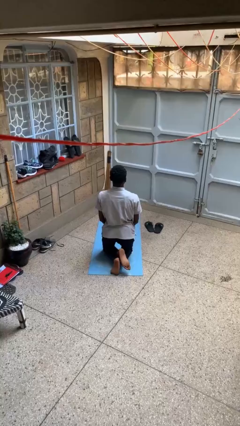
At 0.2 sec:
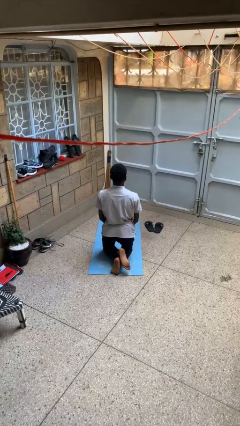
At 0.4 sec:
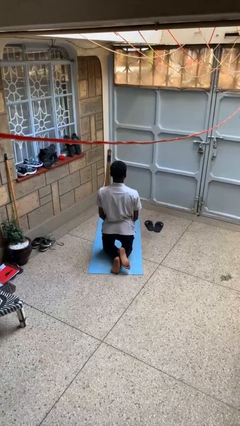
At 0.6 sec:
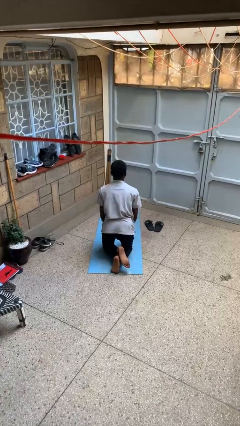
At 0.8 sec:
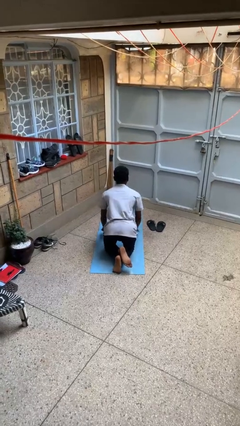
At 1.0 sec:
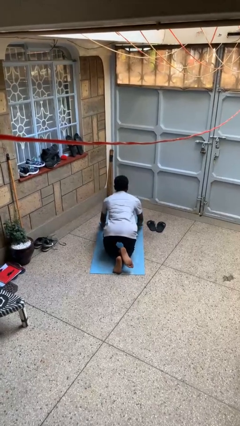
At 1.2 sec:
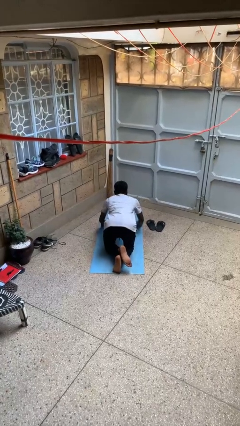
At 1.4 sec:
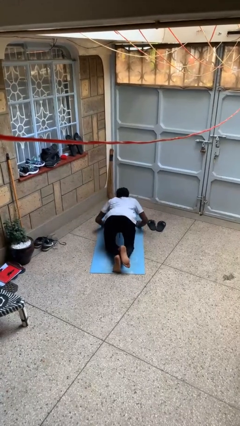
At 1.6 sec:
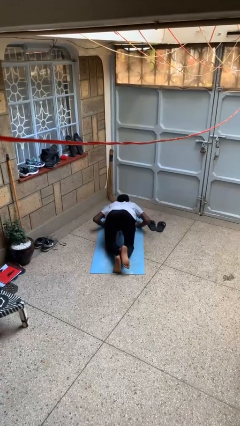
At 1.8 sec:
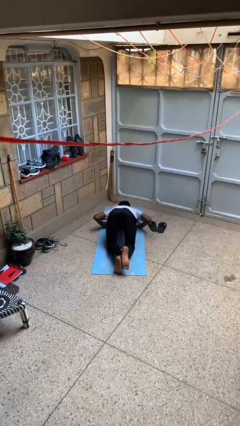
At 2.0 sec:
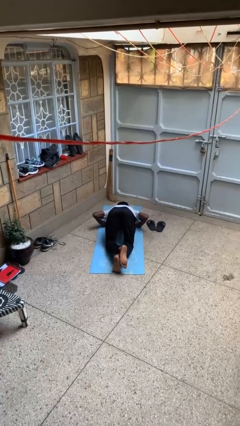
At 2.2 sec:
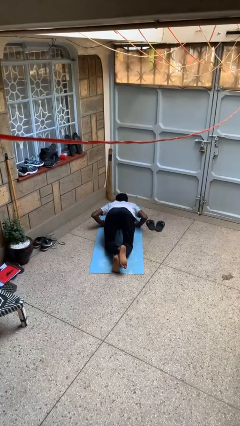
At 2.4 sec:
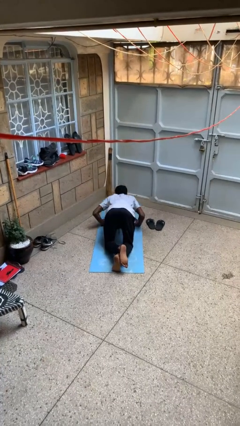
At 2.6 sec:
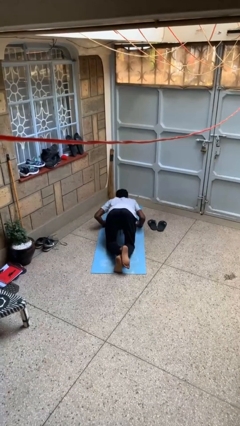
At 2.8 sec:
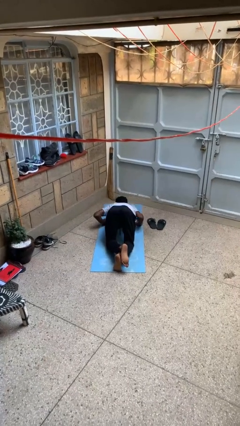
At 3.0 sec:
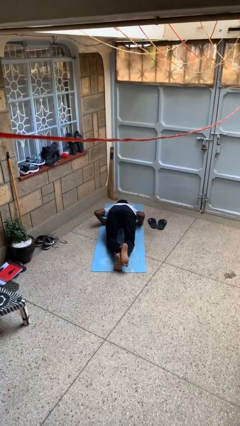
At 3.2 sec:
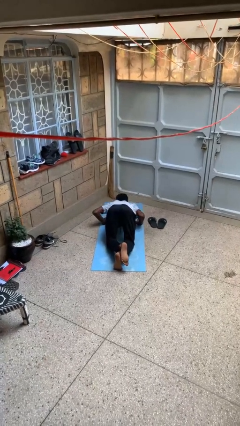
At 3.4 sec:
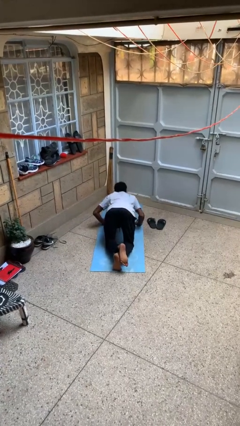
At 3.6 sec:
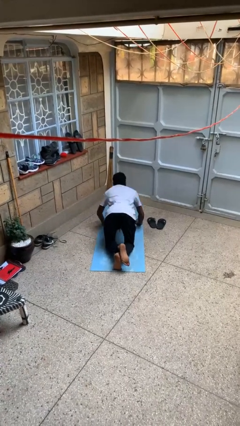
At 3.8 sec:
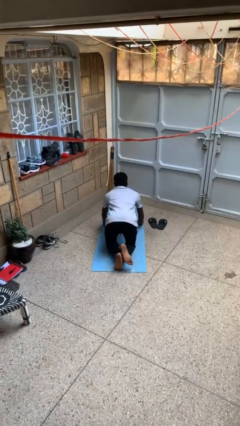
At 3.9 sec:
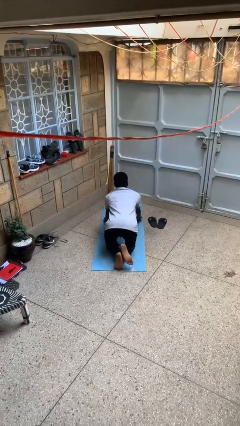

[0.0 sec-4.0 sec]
person exercises with pushup

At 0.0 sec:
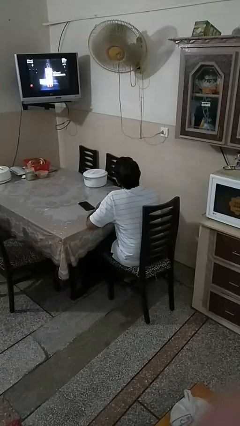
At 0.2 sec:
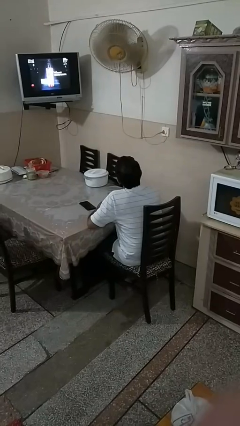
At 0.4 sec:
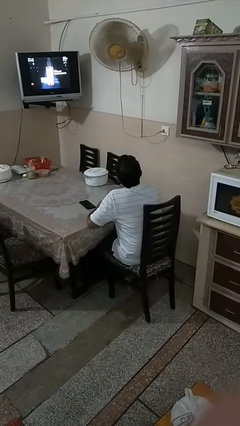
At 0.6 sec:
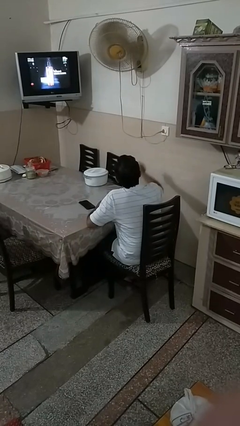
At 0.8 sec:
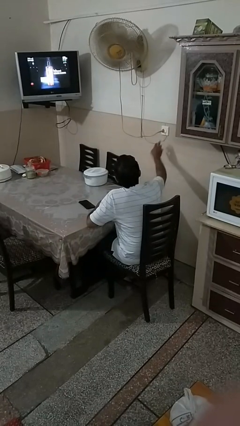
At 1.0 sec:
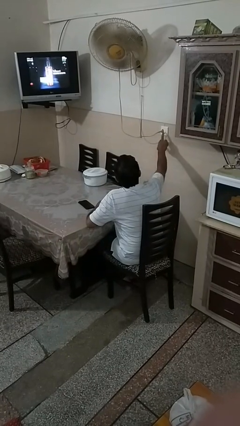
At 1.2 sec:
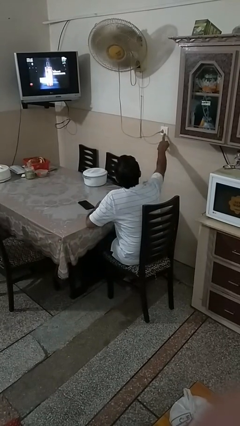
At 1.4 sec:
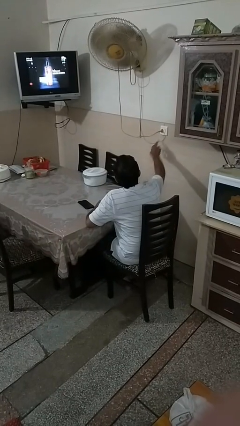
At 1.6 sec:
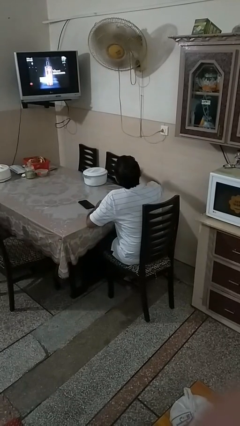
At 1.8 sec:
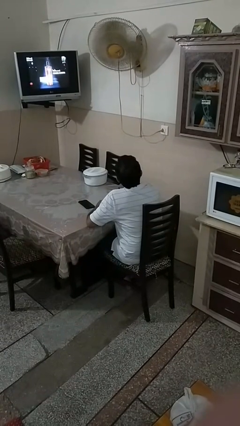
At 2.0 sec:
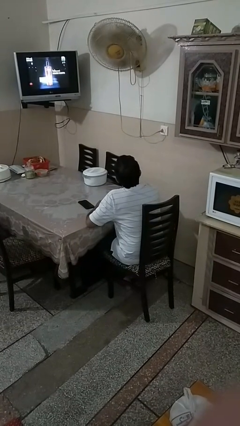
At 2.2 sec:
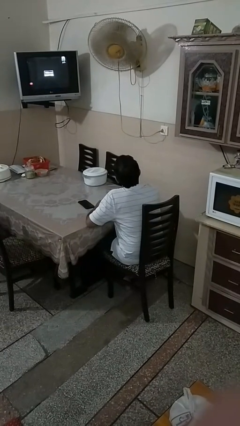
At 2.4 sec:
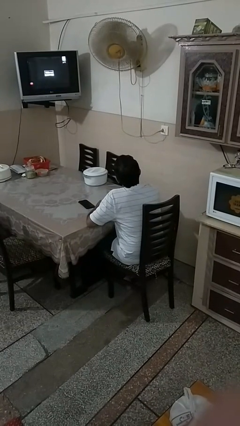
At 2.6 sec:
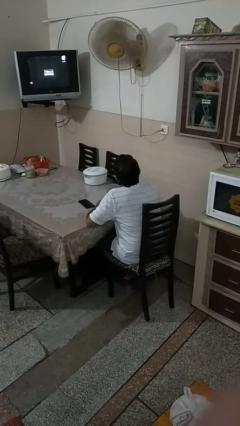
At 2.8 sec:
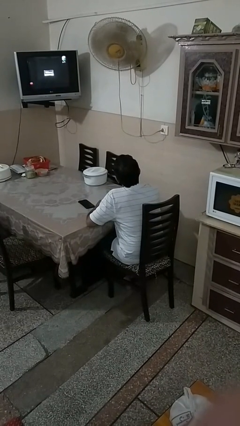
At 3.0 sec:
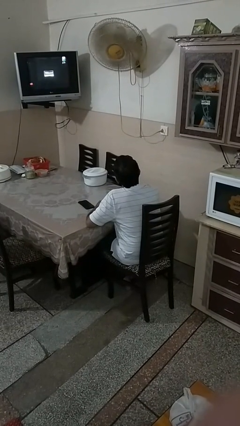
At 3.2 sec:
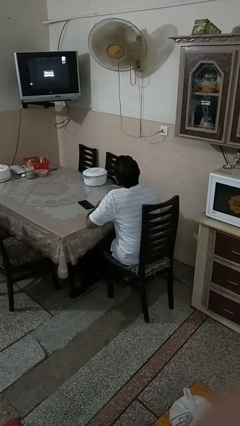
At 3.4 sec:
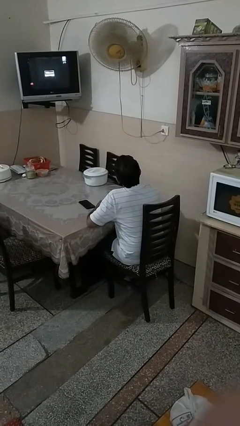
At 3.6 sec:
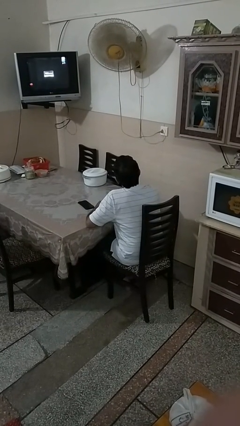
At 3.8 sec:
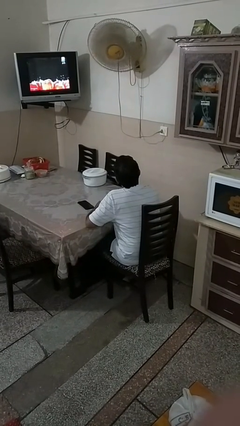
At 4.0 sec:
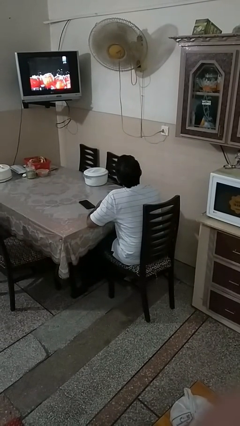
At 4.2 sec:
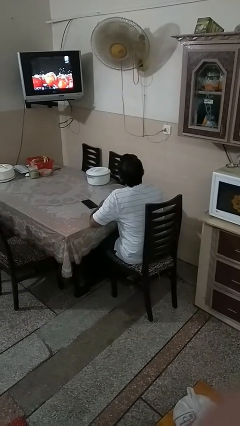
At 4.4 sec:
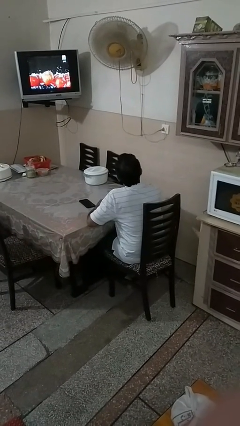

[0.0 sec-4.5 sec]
person turns on fan

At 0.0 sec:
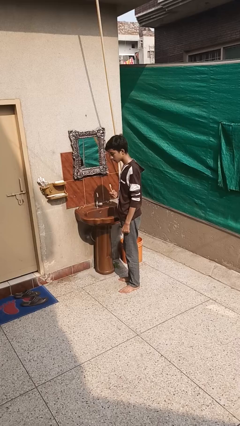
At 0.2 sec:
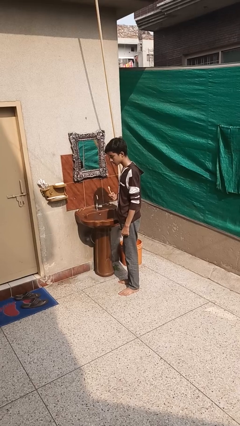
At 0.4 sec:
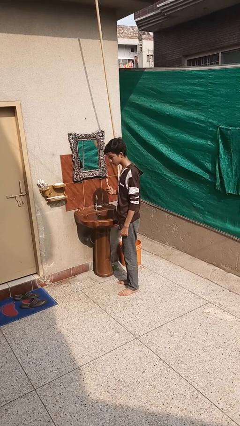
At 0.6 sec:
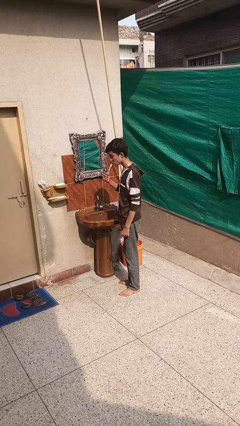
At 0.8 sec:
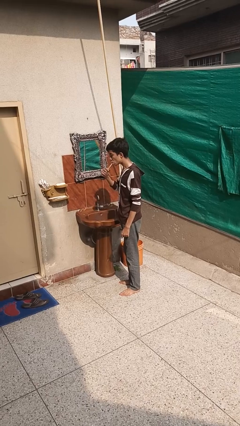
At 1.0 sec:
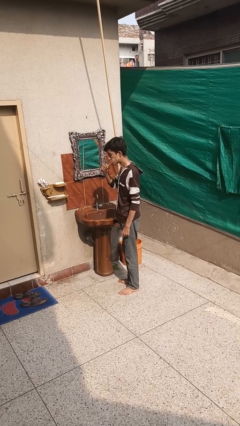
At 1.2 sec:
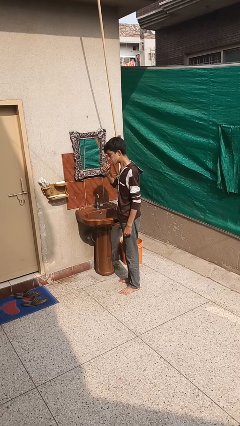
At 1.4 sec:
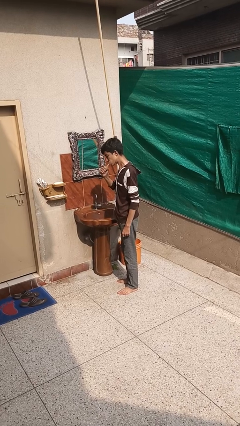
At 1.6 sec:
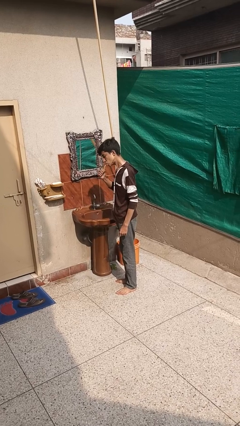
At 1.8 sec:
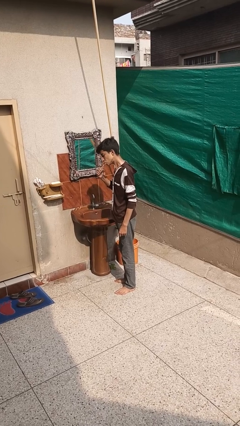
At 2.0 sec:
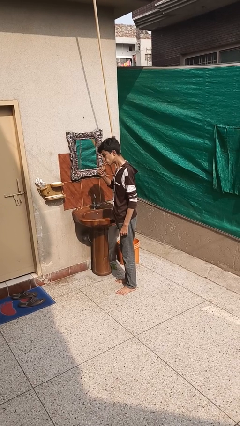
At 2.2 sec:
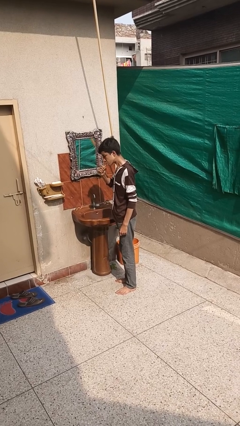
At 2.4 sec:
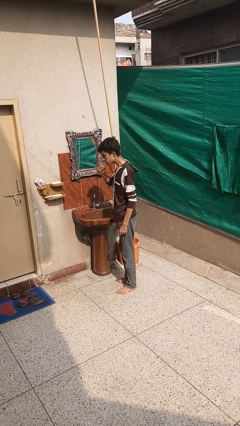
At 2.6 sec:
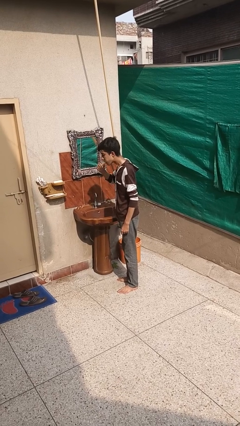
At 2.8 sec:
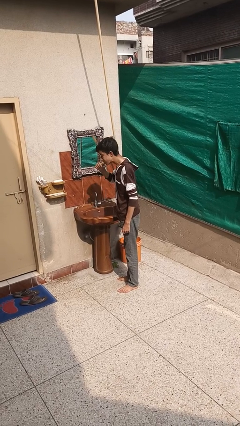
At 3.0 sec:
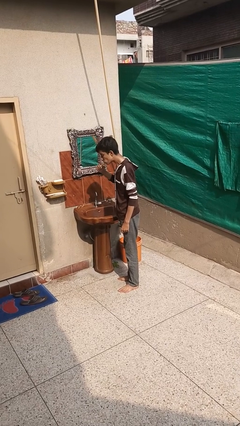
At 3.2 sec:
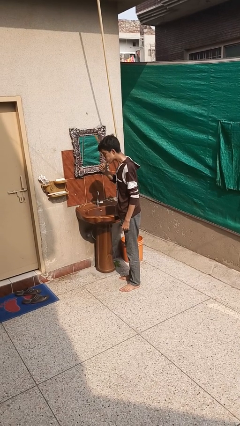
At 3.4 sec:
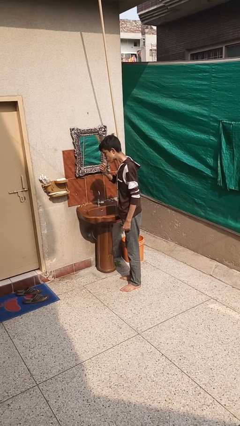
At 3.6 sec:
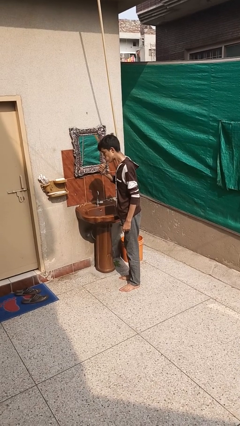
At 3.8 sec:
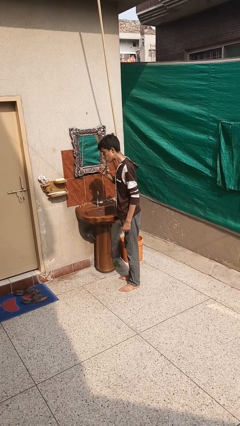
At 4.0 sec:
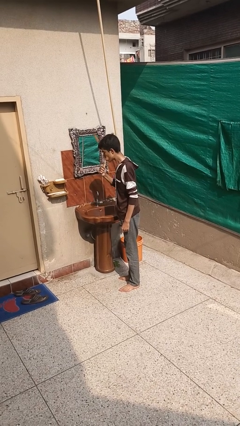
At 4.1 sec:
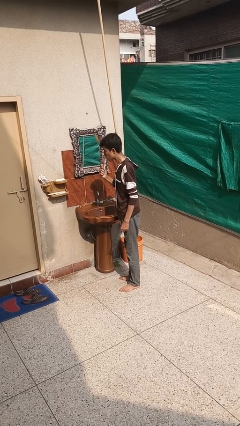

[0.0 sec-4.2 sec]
person brushes teeth

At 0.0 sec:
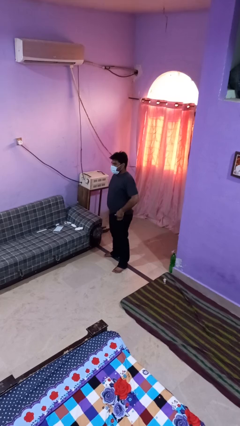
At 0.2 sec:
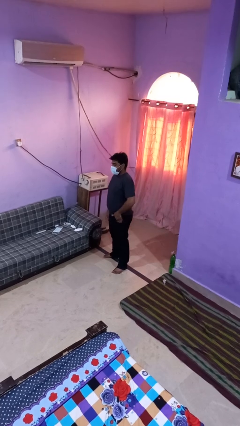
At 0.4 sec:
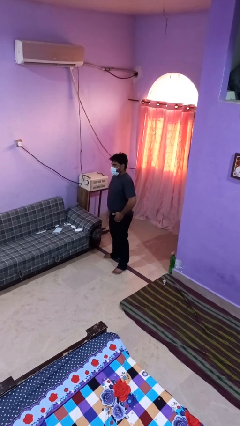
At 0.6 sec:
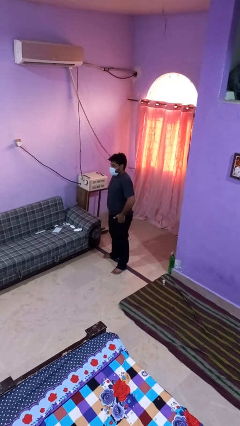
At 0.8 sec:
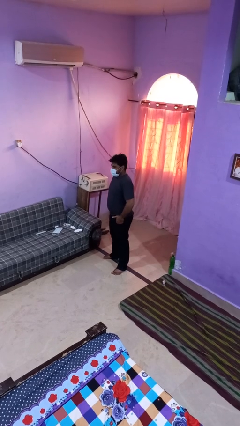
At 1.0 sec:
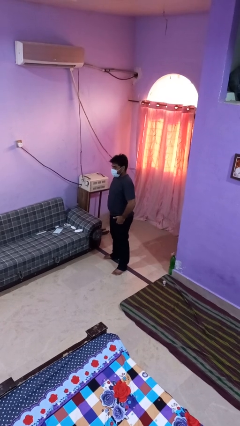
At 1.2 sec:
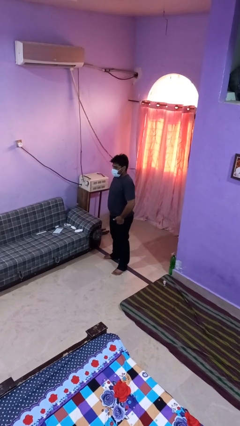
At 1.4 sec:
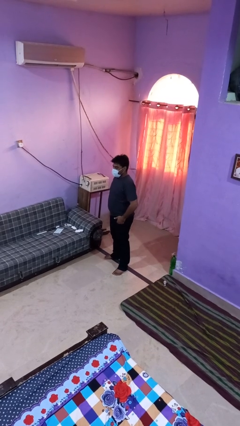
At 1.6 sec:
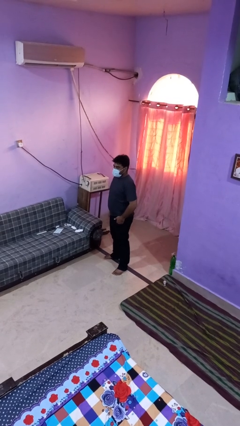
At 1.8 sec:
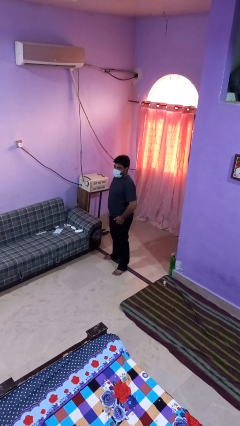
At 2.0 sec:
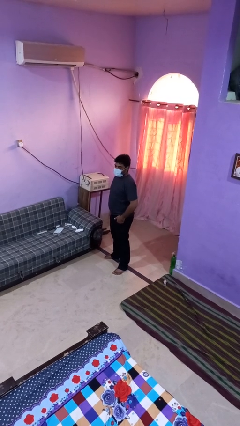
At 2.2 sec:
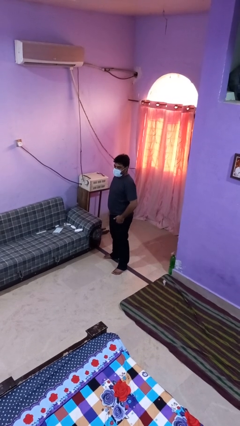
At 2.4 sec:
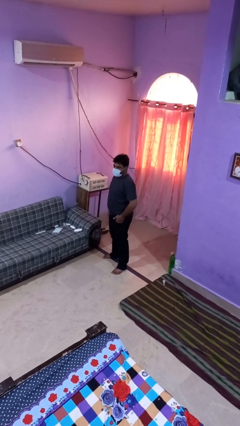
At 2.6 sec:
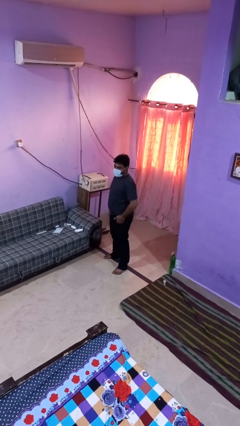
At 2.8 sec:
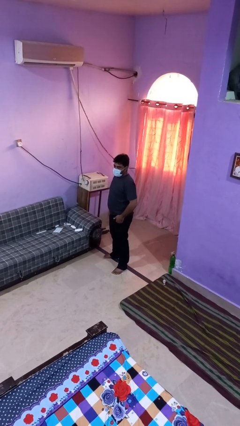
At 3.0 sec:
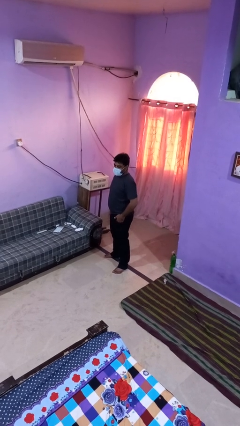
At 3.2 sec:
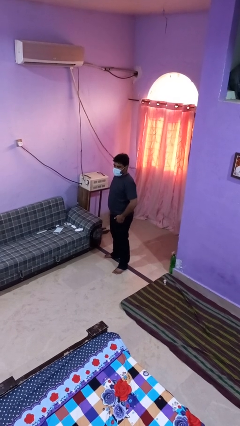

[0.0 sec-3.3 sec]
person puts hands in back pockets

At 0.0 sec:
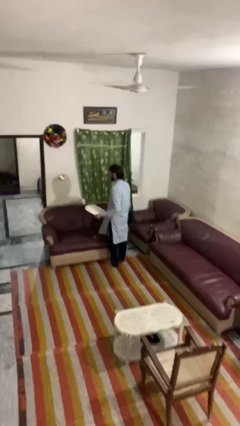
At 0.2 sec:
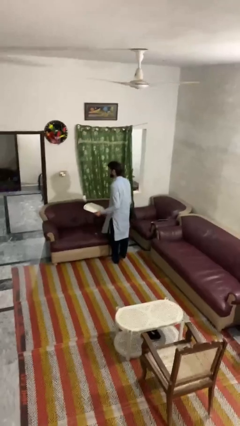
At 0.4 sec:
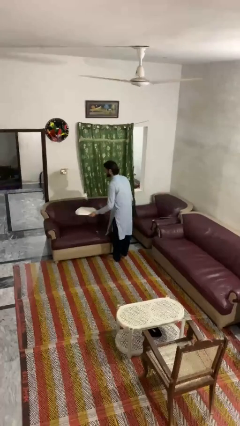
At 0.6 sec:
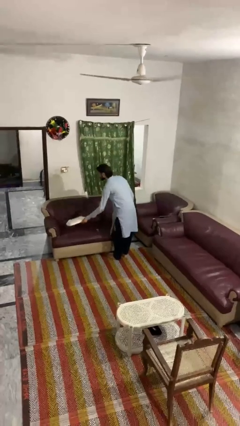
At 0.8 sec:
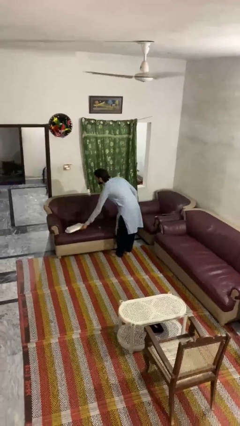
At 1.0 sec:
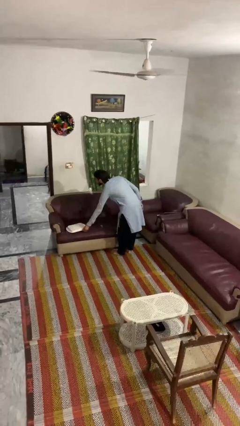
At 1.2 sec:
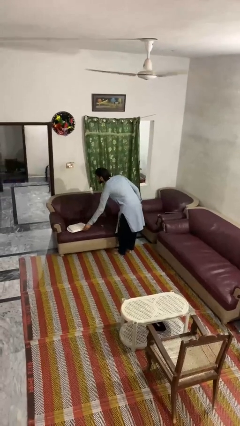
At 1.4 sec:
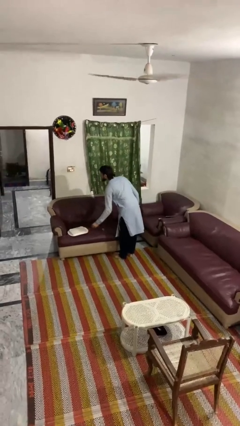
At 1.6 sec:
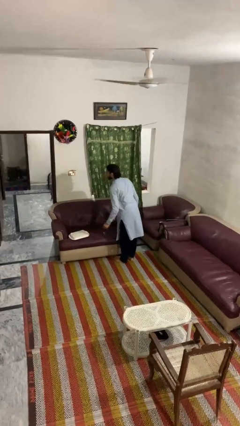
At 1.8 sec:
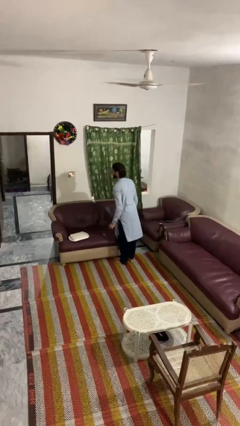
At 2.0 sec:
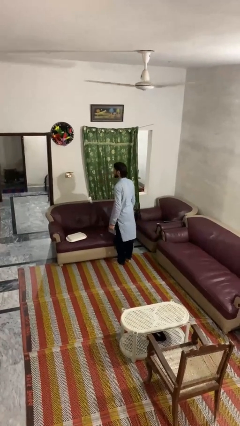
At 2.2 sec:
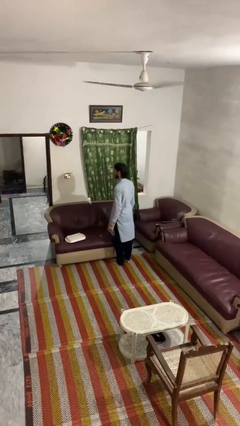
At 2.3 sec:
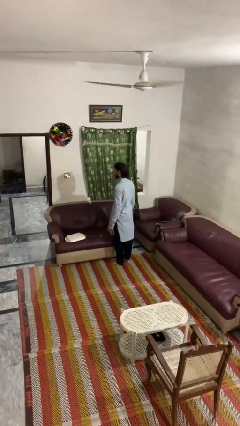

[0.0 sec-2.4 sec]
person puts down object on couch
